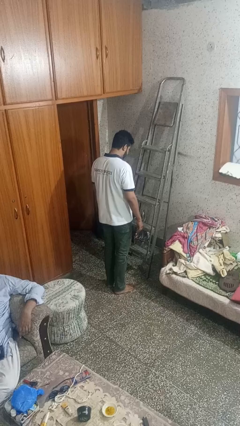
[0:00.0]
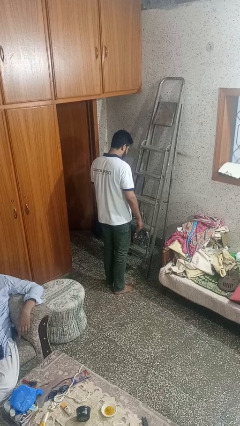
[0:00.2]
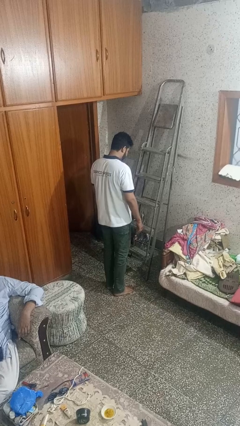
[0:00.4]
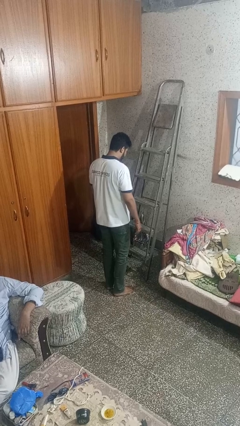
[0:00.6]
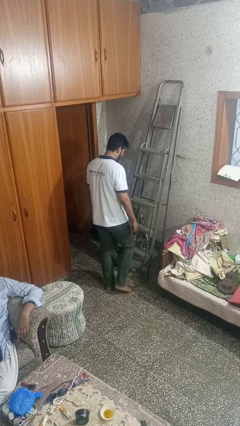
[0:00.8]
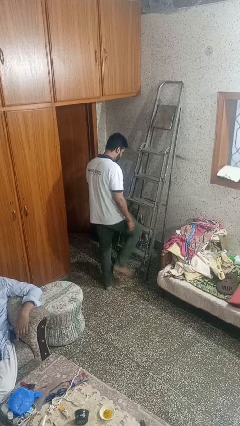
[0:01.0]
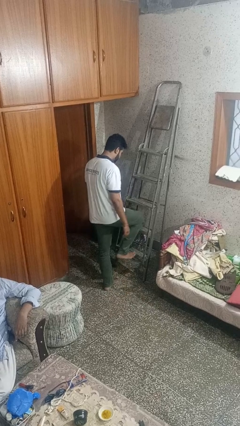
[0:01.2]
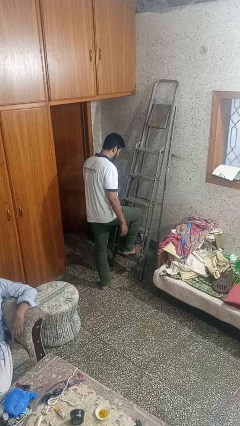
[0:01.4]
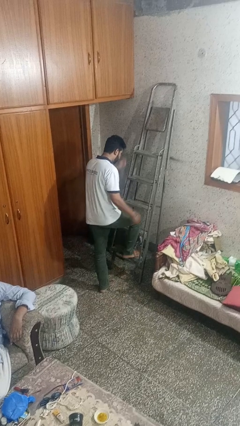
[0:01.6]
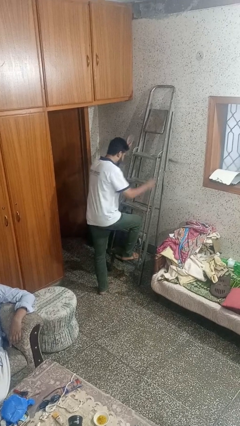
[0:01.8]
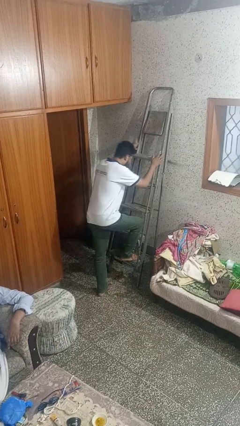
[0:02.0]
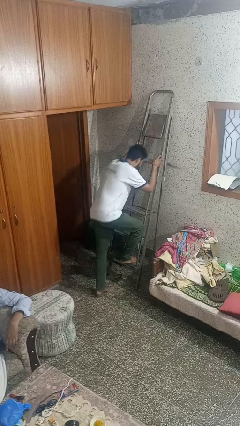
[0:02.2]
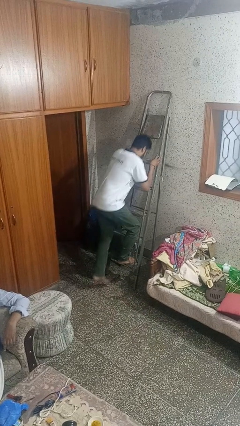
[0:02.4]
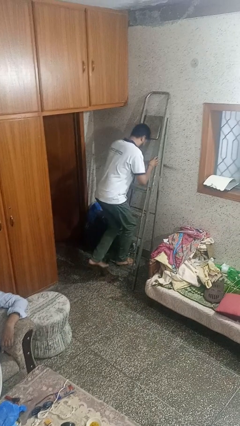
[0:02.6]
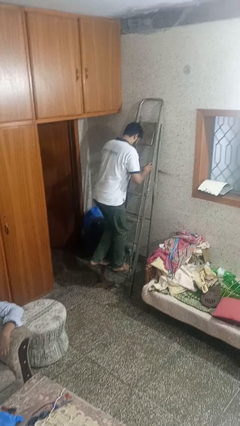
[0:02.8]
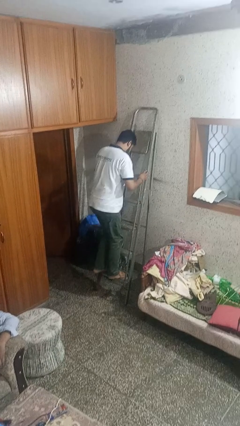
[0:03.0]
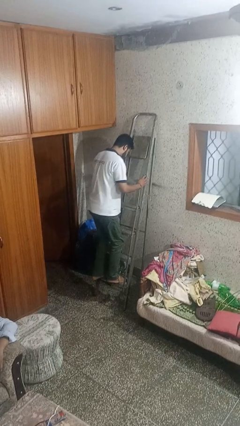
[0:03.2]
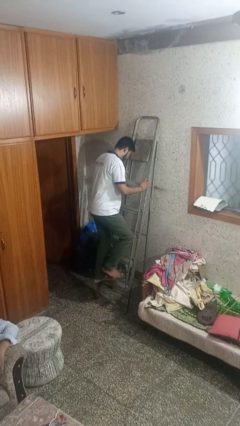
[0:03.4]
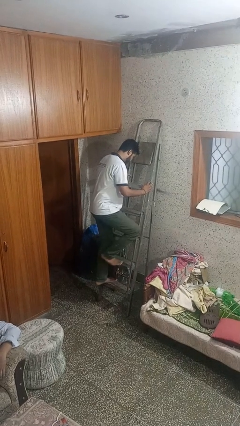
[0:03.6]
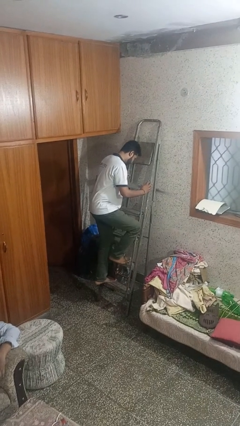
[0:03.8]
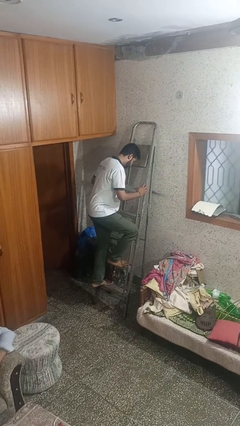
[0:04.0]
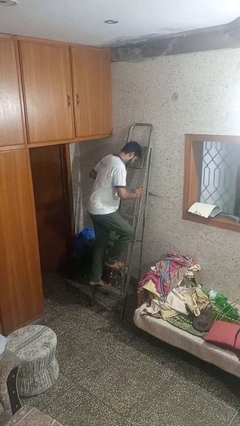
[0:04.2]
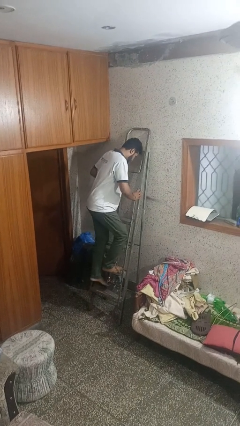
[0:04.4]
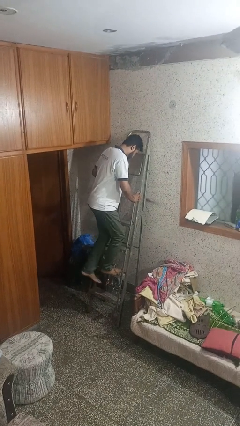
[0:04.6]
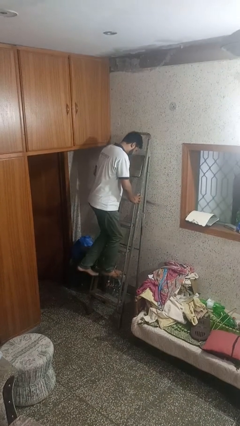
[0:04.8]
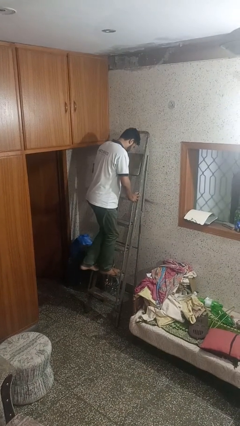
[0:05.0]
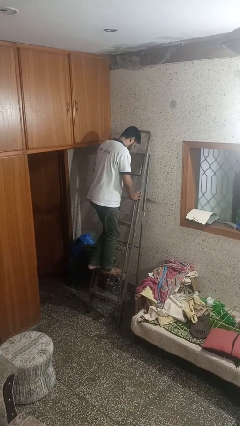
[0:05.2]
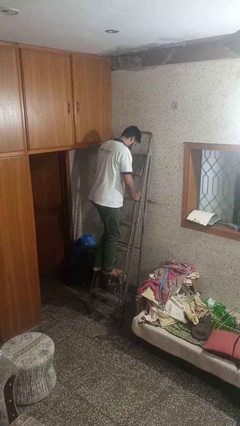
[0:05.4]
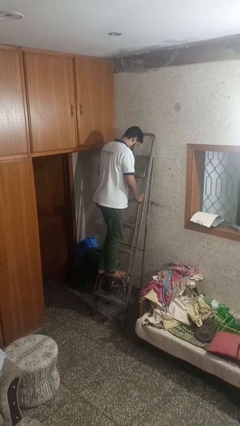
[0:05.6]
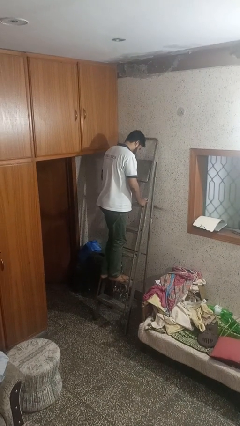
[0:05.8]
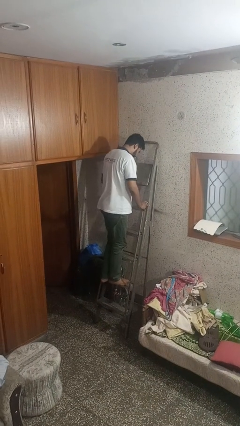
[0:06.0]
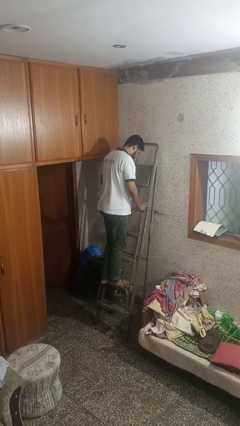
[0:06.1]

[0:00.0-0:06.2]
person climbs up ladder

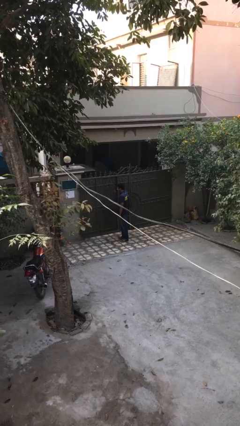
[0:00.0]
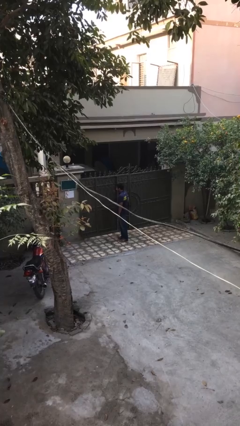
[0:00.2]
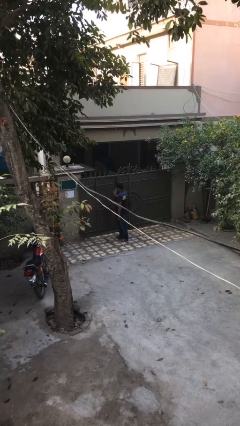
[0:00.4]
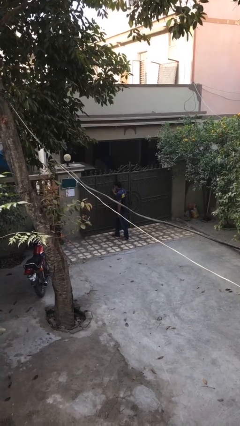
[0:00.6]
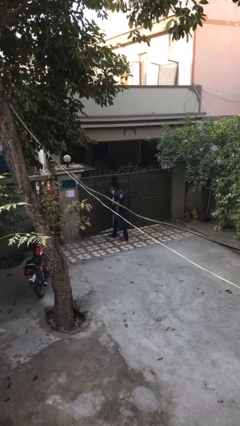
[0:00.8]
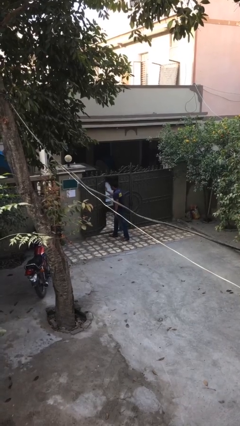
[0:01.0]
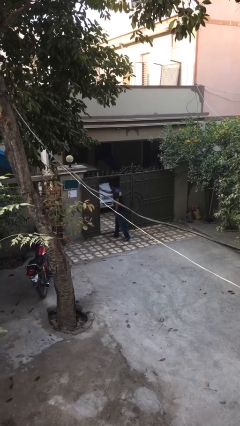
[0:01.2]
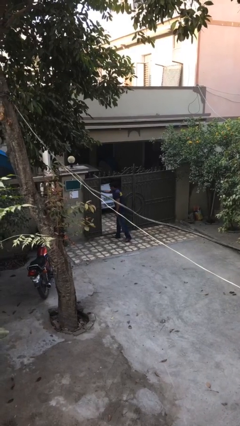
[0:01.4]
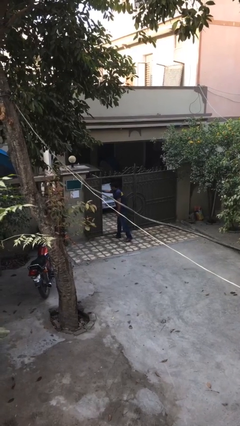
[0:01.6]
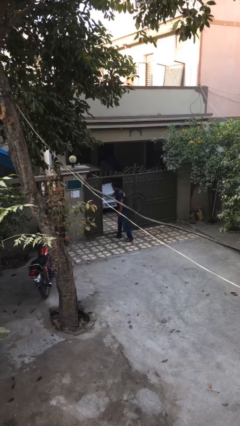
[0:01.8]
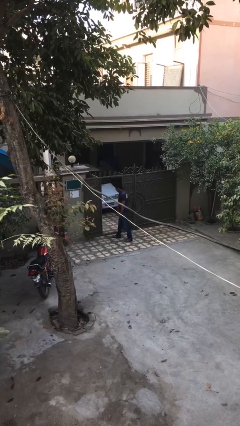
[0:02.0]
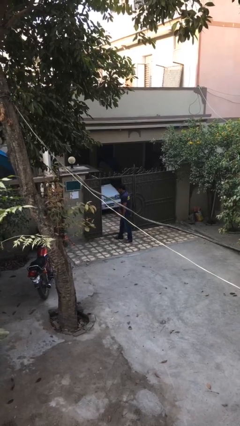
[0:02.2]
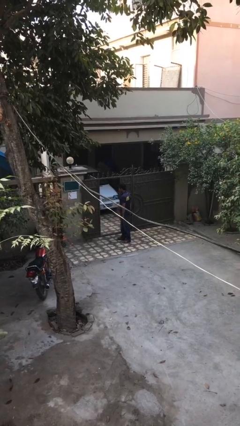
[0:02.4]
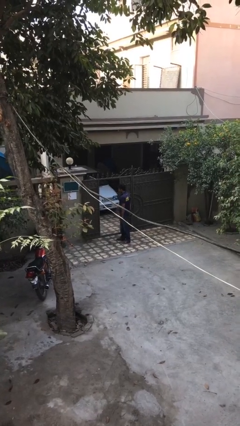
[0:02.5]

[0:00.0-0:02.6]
person opens facility door

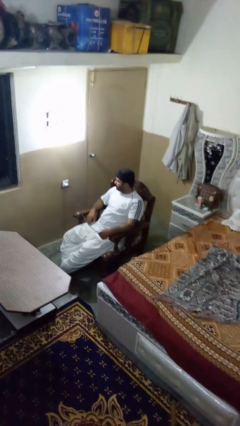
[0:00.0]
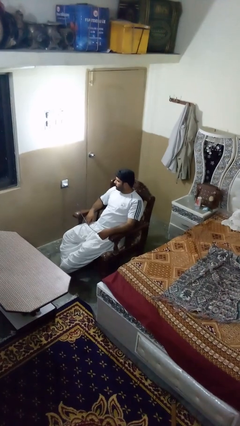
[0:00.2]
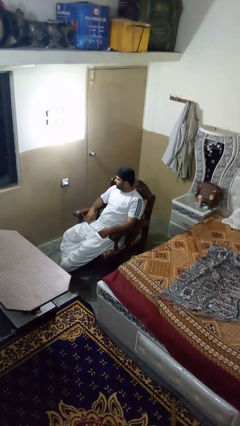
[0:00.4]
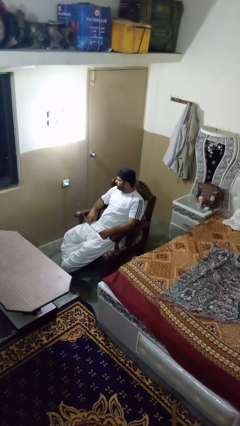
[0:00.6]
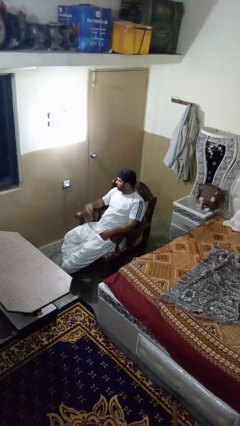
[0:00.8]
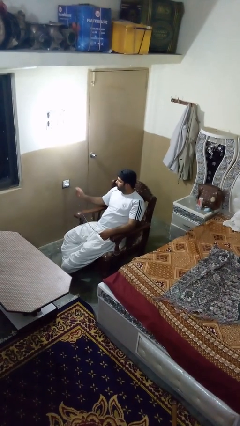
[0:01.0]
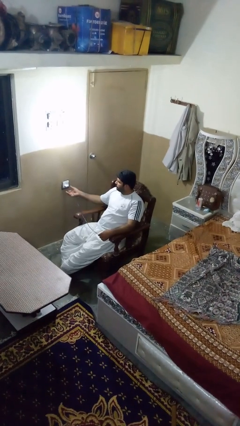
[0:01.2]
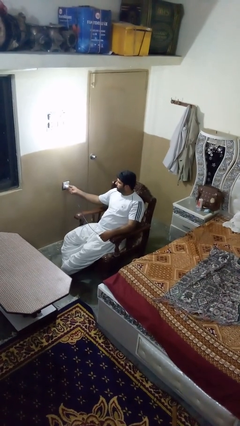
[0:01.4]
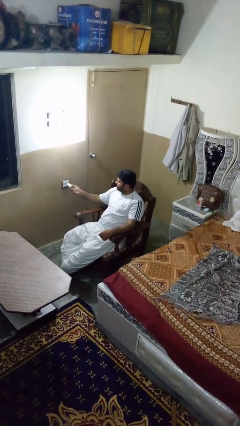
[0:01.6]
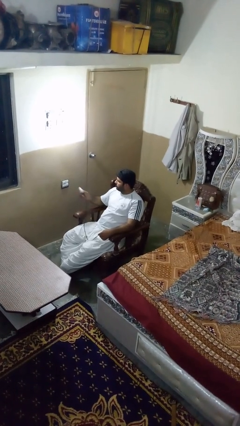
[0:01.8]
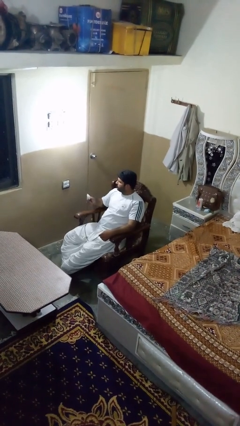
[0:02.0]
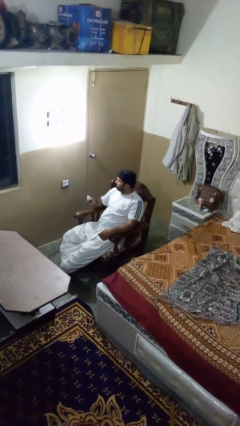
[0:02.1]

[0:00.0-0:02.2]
person unplugs from electrical socket

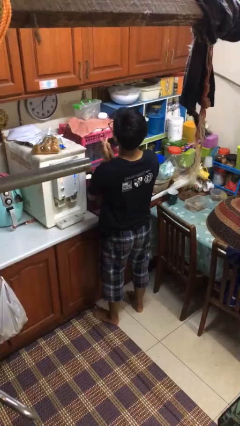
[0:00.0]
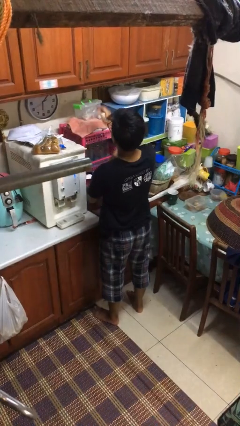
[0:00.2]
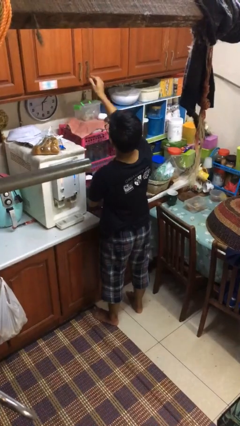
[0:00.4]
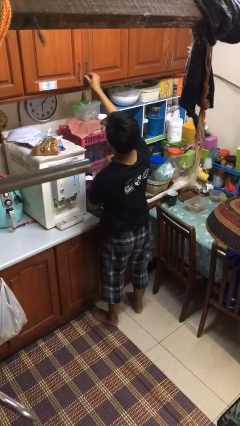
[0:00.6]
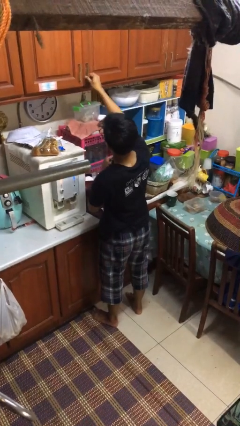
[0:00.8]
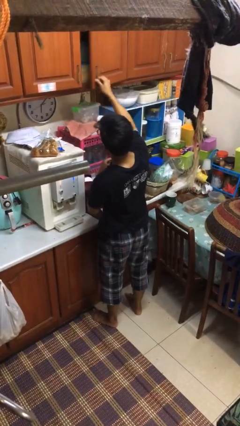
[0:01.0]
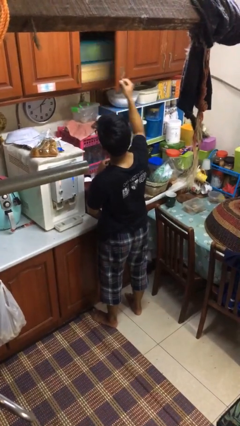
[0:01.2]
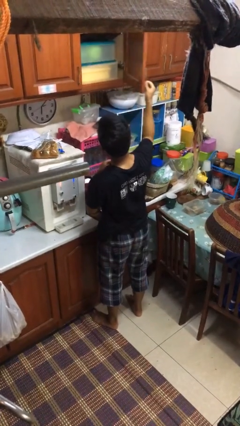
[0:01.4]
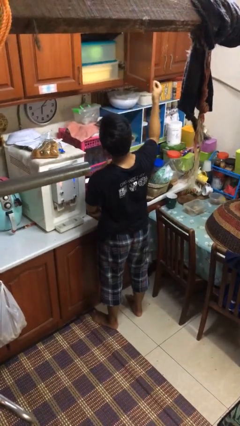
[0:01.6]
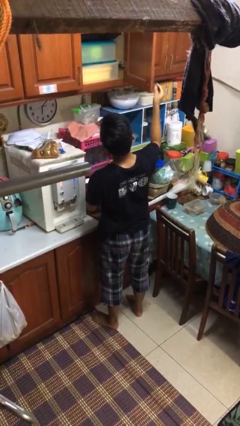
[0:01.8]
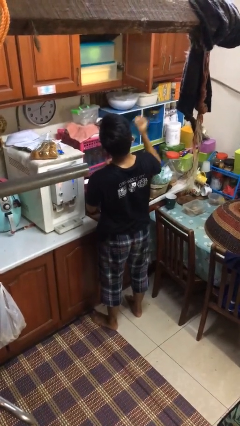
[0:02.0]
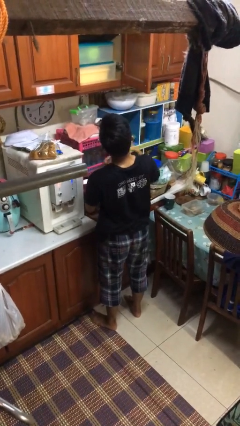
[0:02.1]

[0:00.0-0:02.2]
person opens kitchen drawer

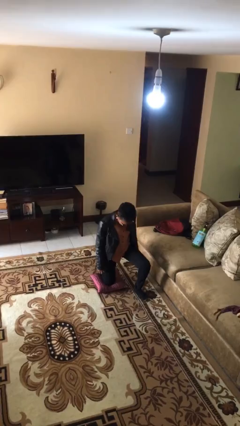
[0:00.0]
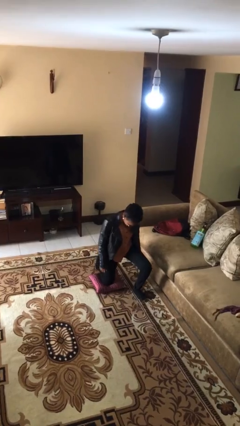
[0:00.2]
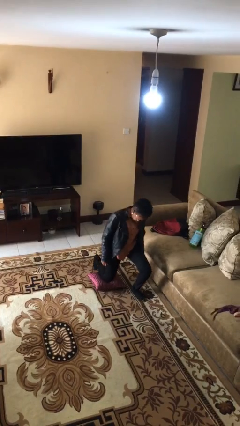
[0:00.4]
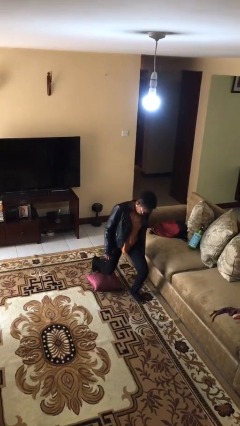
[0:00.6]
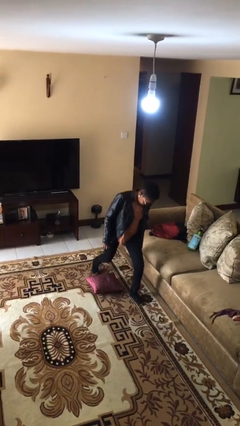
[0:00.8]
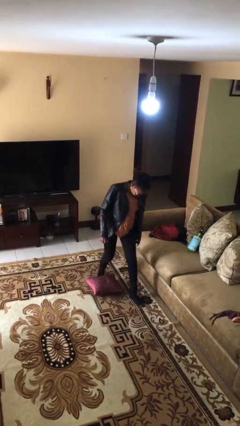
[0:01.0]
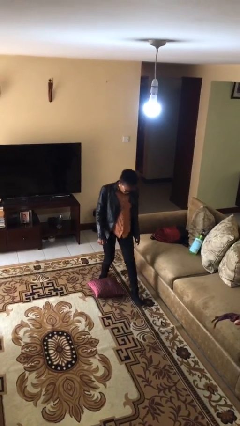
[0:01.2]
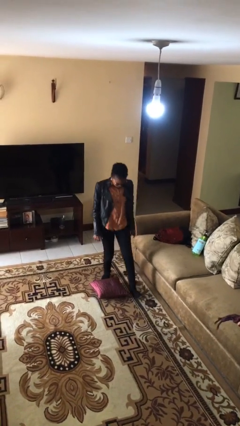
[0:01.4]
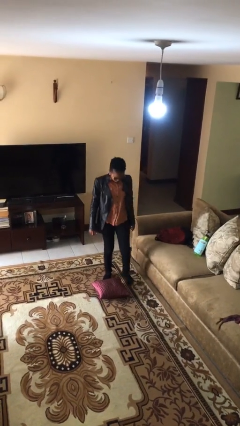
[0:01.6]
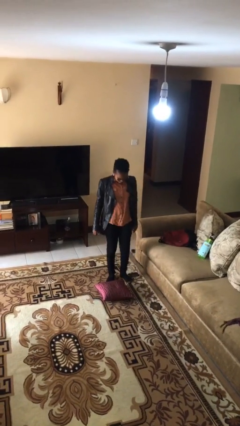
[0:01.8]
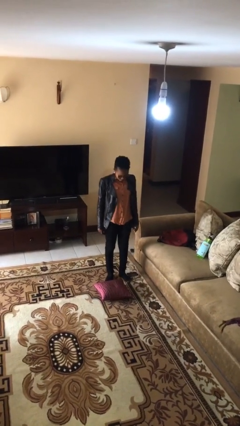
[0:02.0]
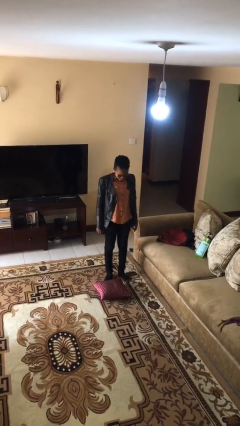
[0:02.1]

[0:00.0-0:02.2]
person stands up from floor

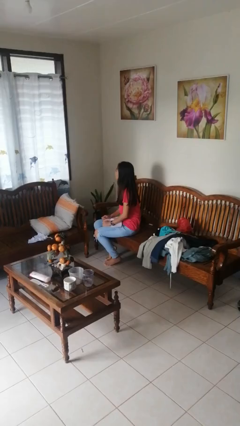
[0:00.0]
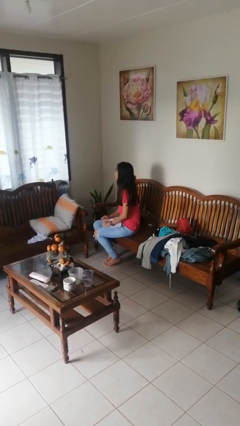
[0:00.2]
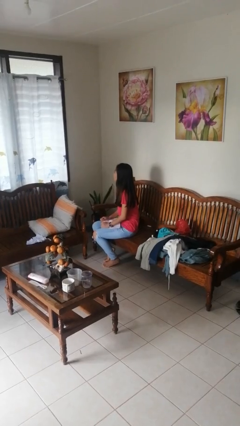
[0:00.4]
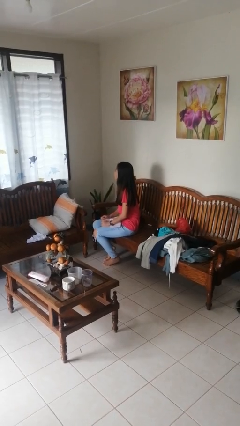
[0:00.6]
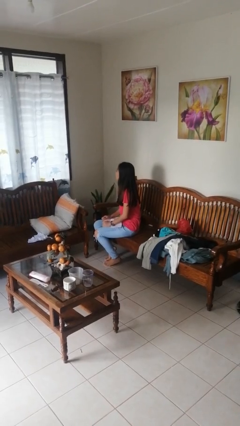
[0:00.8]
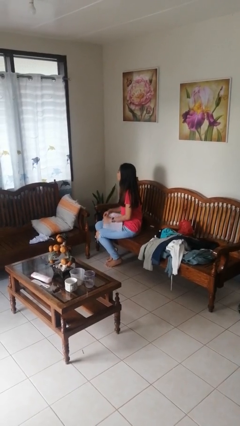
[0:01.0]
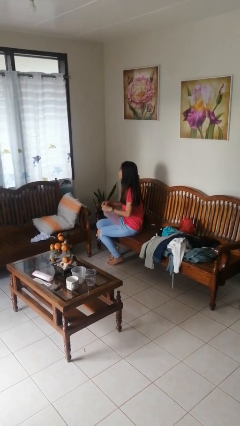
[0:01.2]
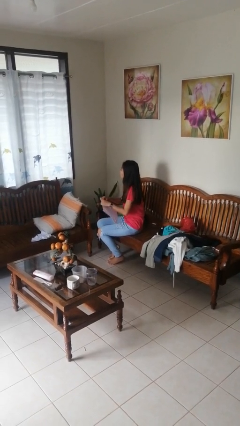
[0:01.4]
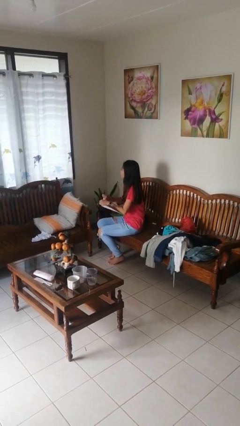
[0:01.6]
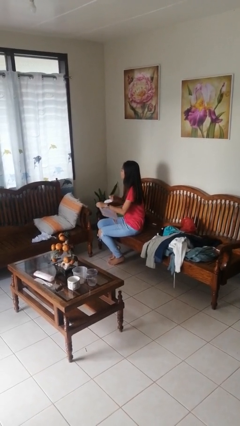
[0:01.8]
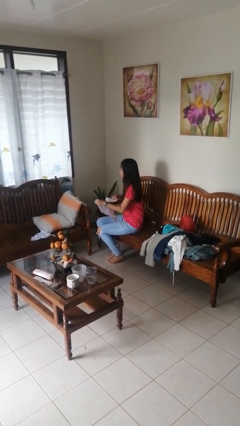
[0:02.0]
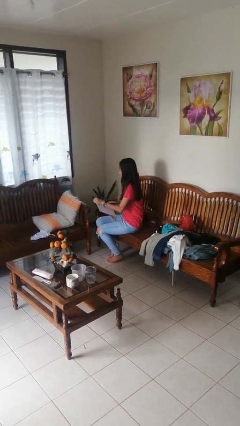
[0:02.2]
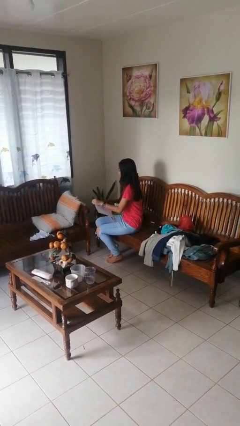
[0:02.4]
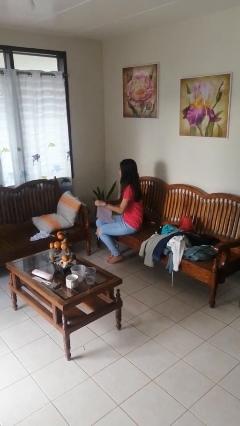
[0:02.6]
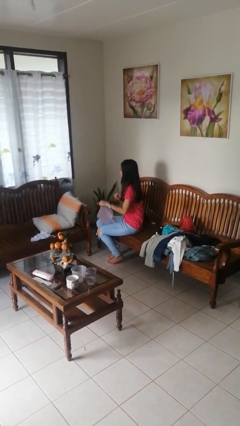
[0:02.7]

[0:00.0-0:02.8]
person tears paper
